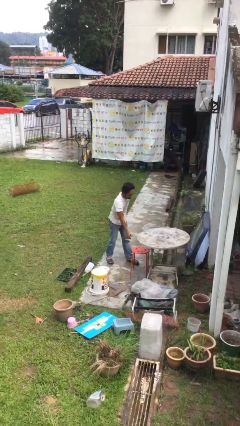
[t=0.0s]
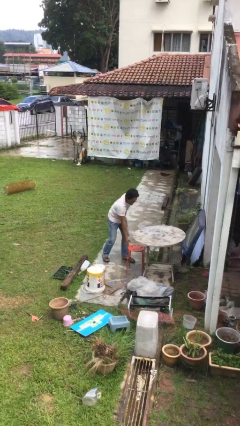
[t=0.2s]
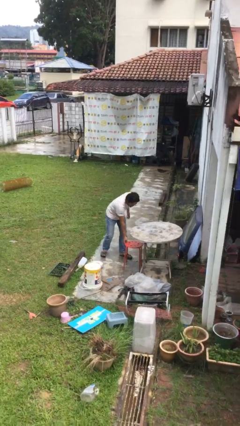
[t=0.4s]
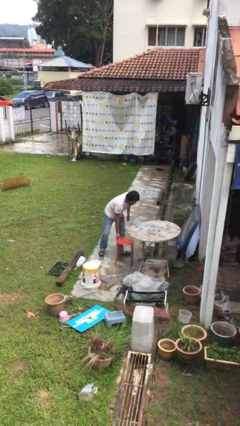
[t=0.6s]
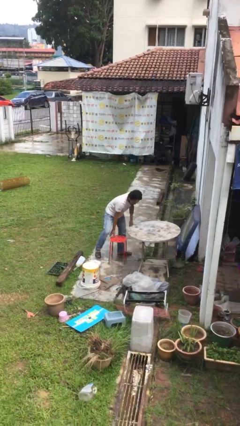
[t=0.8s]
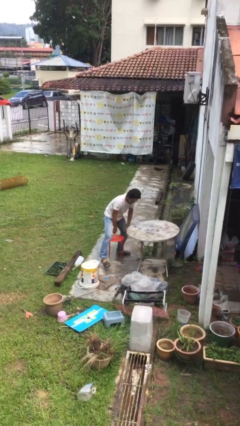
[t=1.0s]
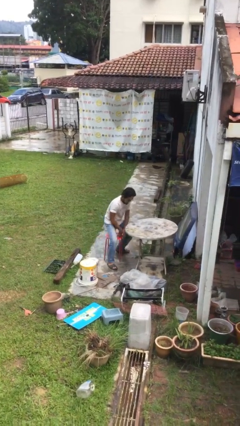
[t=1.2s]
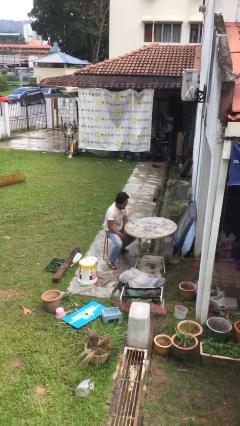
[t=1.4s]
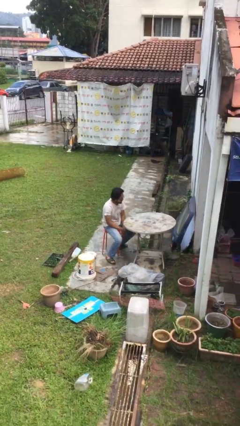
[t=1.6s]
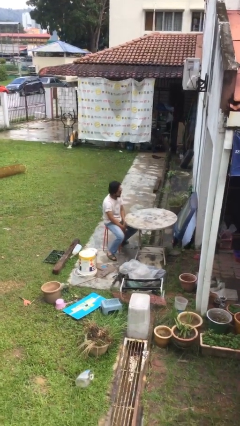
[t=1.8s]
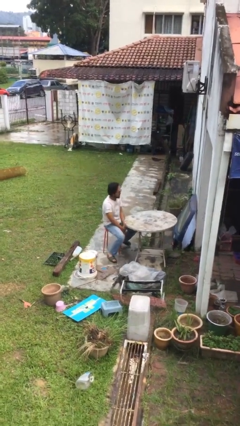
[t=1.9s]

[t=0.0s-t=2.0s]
person sits down

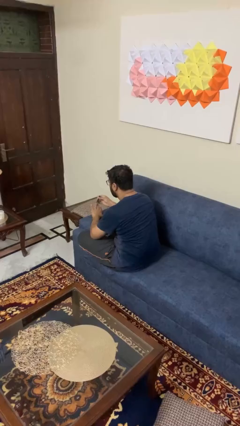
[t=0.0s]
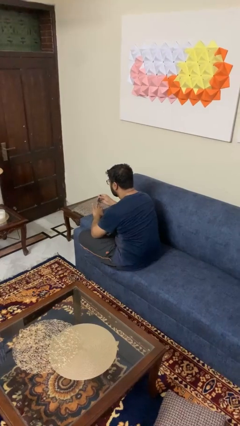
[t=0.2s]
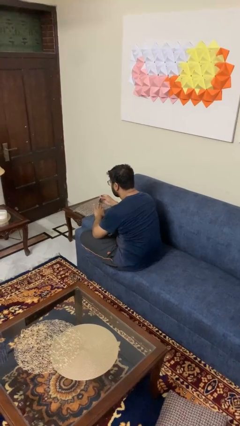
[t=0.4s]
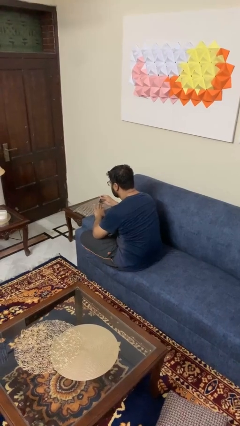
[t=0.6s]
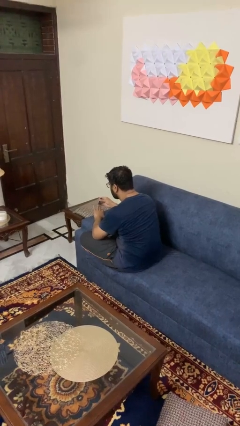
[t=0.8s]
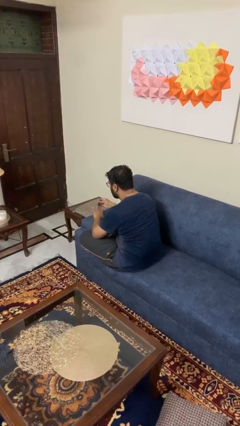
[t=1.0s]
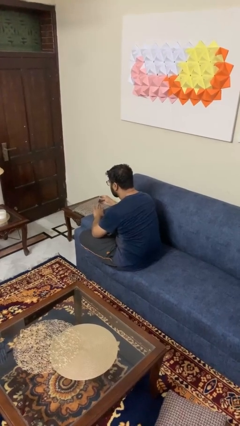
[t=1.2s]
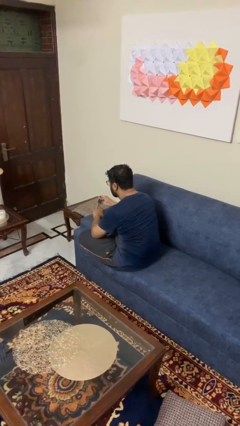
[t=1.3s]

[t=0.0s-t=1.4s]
person clips fingernails

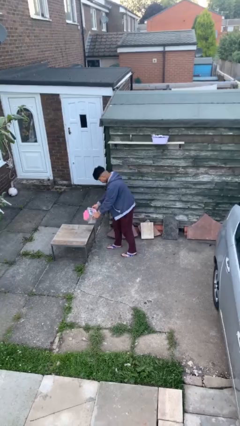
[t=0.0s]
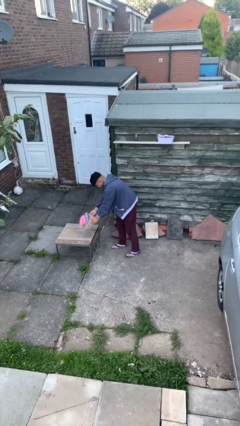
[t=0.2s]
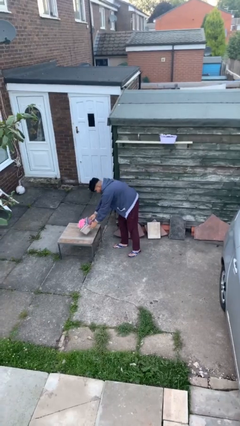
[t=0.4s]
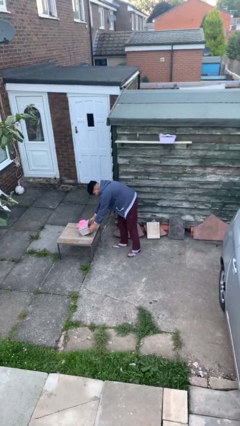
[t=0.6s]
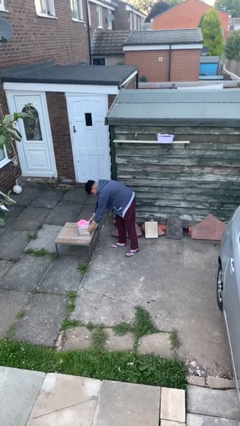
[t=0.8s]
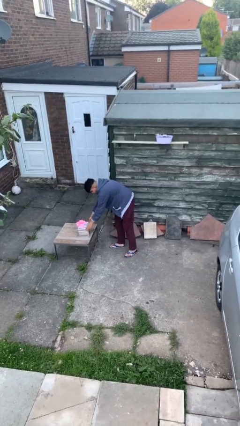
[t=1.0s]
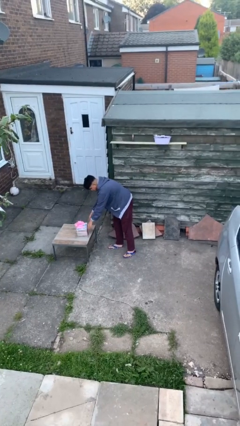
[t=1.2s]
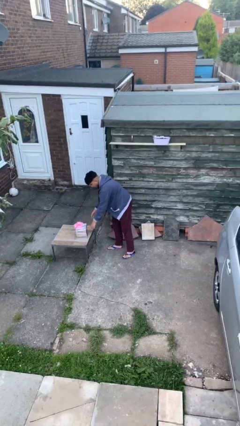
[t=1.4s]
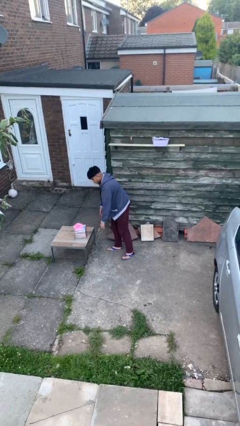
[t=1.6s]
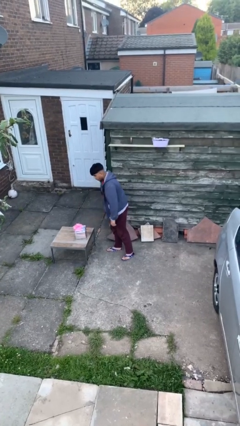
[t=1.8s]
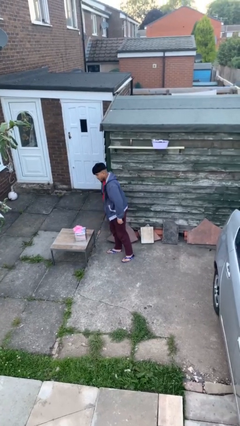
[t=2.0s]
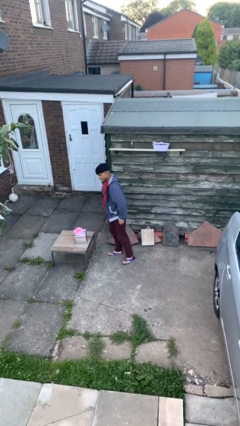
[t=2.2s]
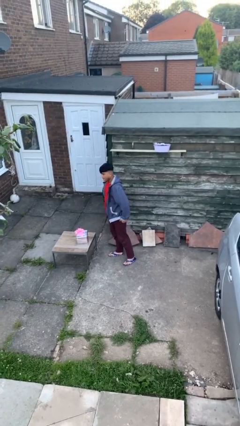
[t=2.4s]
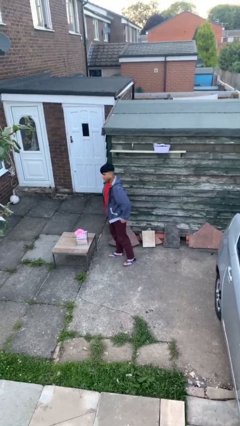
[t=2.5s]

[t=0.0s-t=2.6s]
person puts down object on table

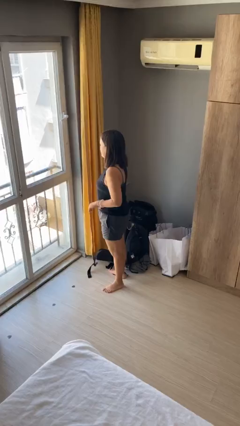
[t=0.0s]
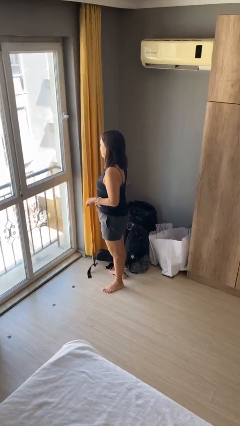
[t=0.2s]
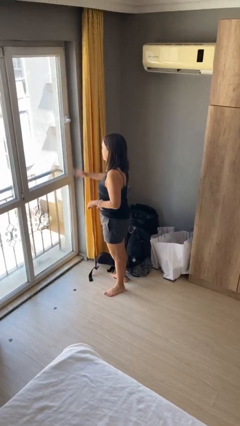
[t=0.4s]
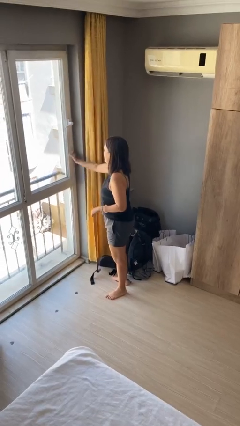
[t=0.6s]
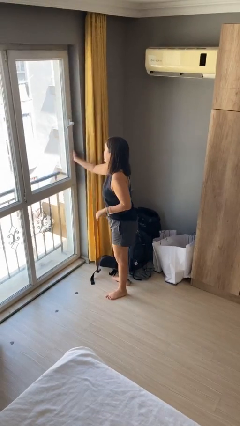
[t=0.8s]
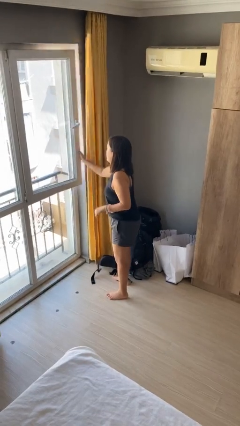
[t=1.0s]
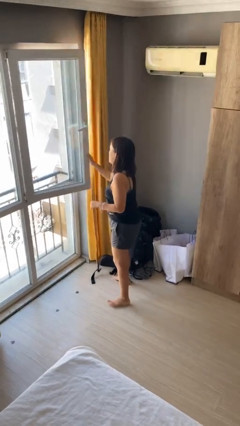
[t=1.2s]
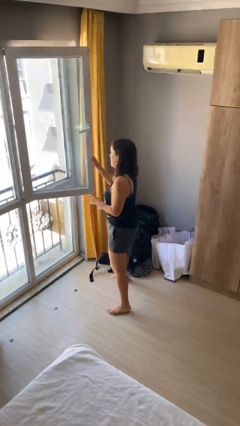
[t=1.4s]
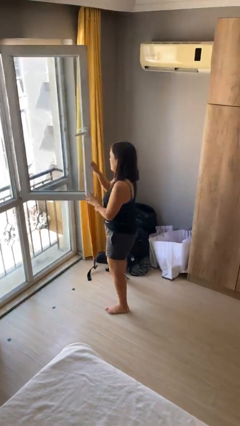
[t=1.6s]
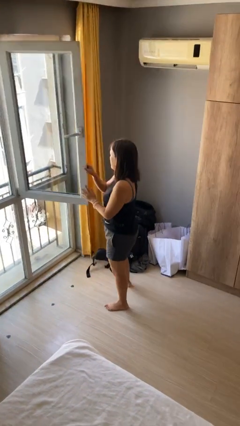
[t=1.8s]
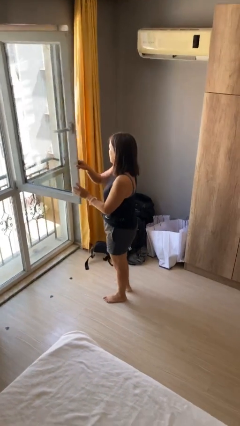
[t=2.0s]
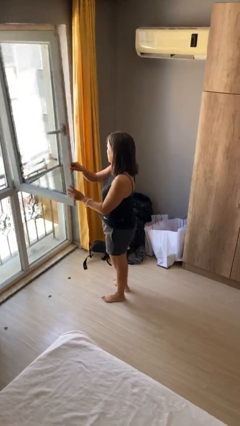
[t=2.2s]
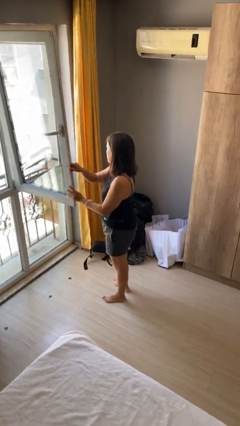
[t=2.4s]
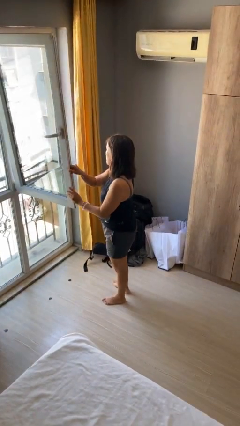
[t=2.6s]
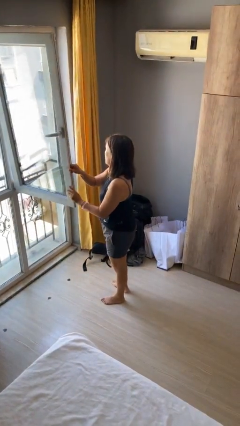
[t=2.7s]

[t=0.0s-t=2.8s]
person opens home window

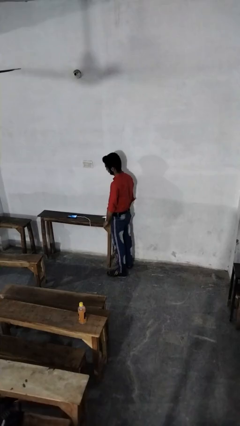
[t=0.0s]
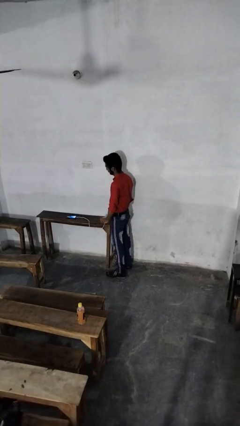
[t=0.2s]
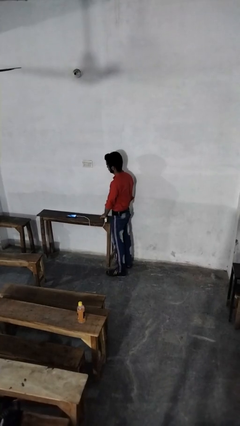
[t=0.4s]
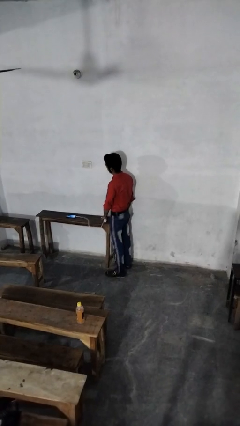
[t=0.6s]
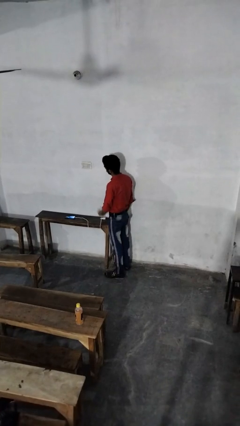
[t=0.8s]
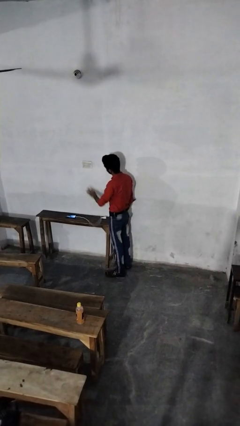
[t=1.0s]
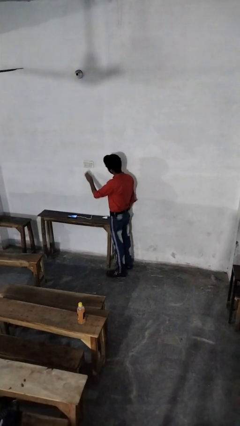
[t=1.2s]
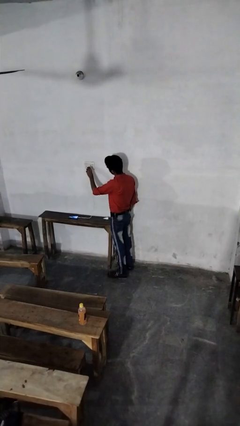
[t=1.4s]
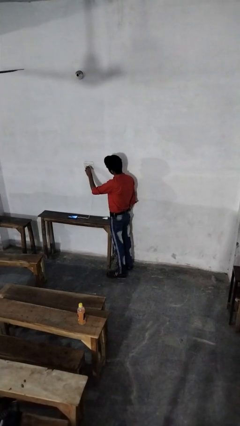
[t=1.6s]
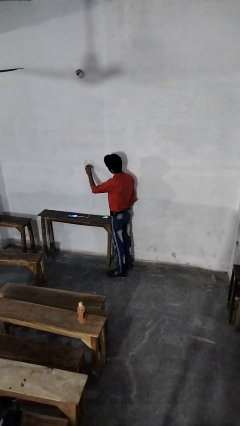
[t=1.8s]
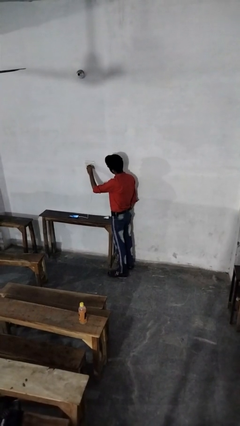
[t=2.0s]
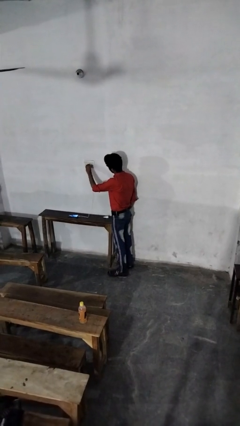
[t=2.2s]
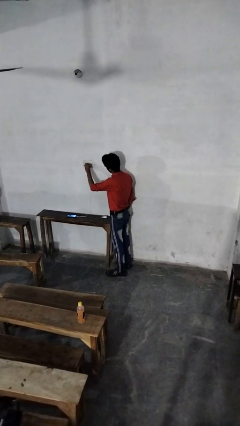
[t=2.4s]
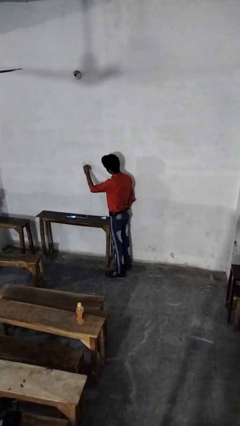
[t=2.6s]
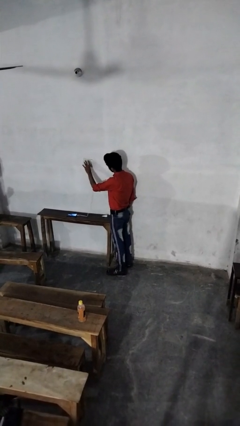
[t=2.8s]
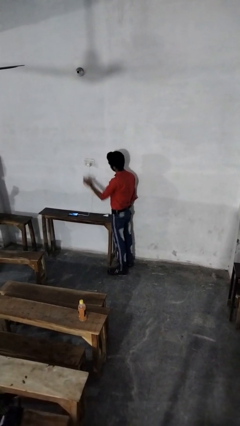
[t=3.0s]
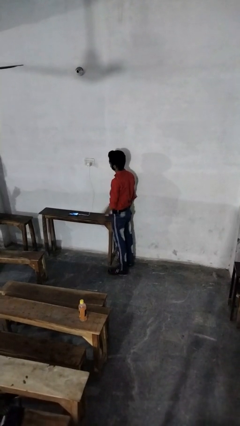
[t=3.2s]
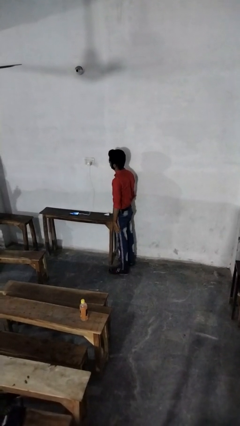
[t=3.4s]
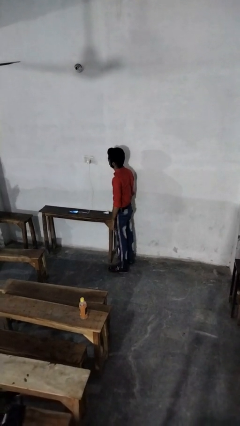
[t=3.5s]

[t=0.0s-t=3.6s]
person plugs into electrical socket

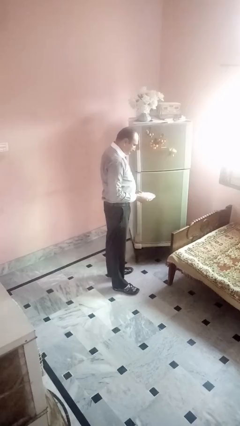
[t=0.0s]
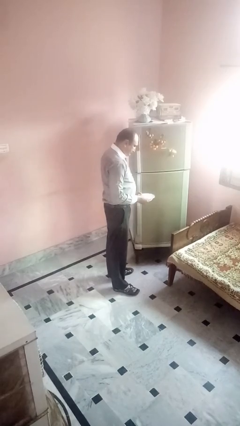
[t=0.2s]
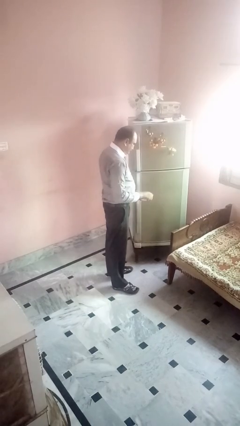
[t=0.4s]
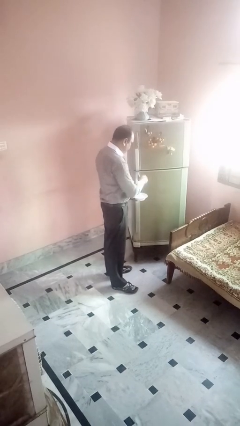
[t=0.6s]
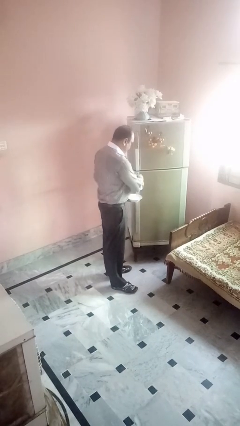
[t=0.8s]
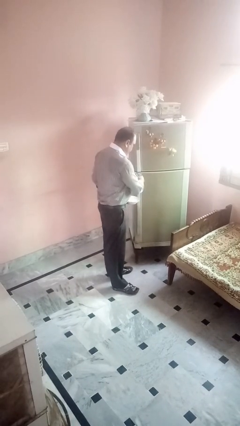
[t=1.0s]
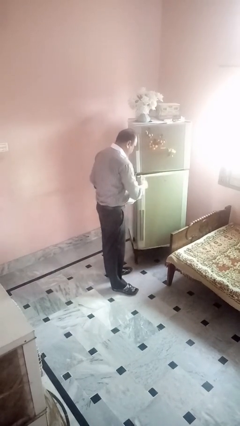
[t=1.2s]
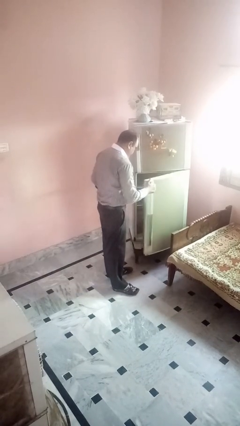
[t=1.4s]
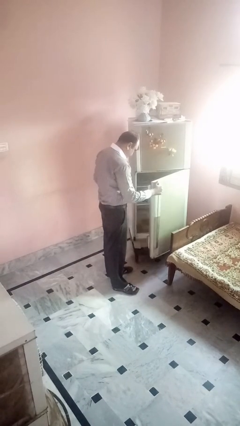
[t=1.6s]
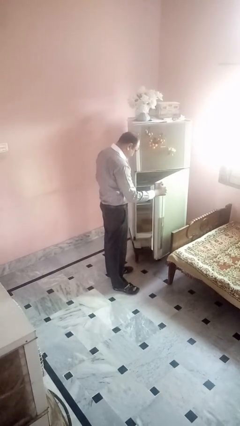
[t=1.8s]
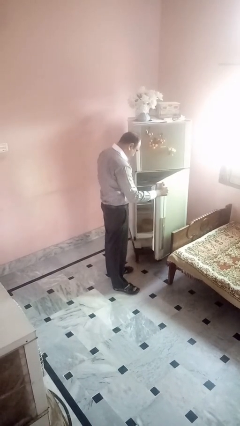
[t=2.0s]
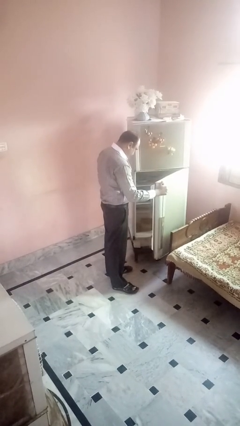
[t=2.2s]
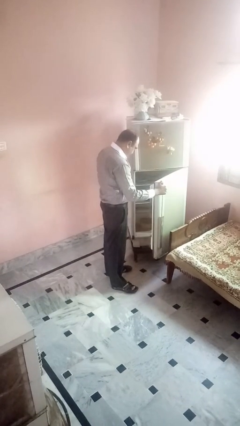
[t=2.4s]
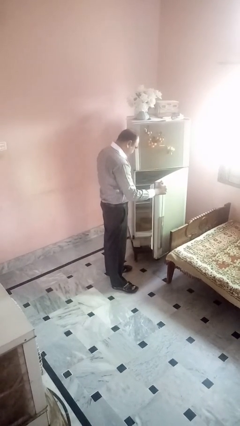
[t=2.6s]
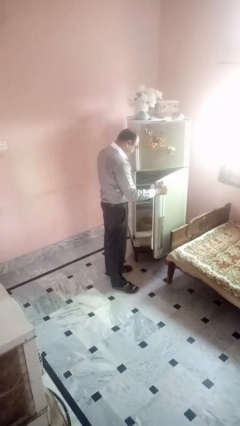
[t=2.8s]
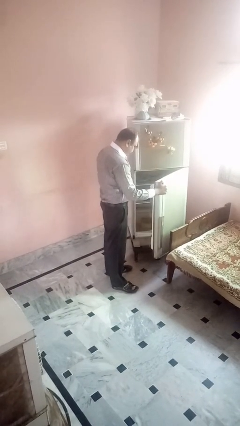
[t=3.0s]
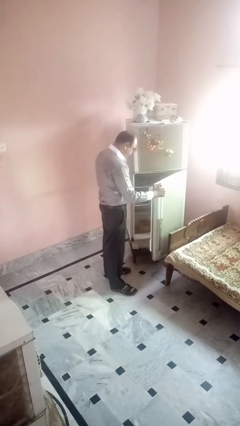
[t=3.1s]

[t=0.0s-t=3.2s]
person opens refrigerator

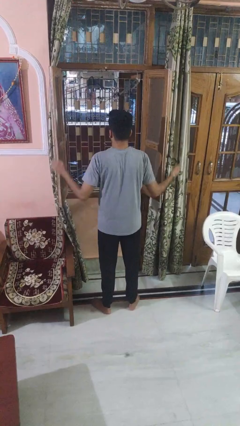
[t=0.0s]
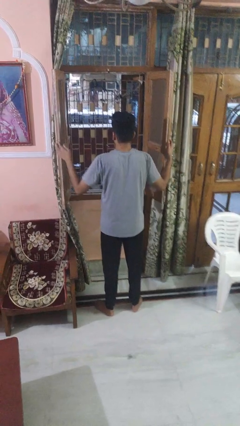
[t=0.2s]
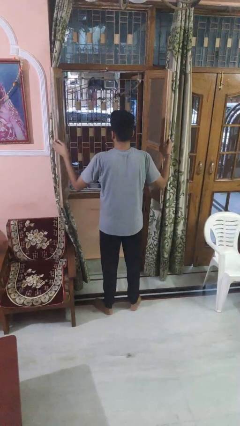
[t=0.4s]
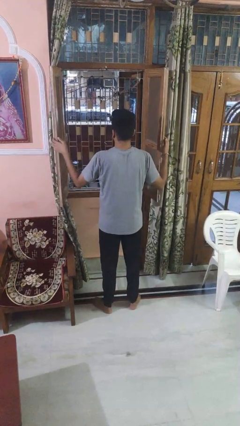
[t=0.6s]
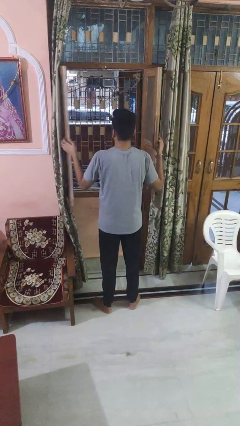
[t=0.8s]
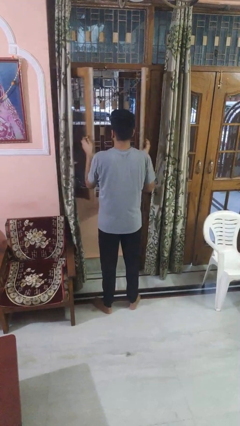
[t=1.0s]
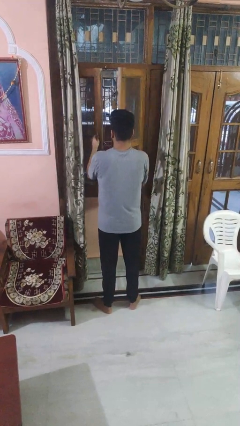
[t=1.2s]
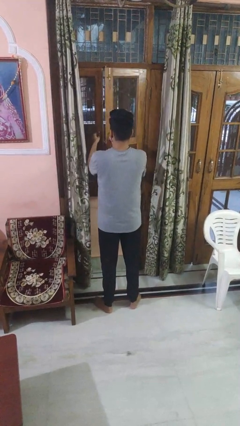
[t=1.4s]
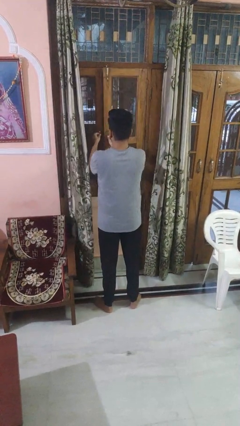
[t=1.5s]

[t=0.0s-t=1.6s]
person closes home window

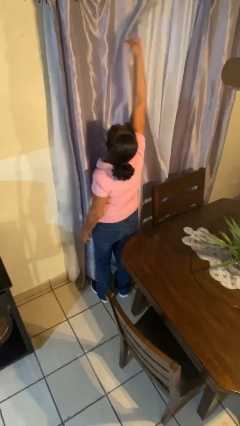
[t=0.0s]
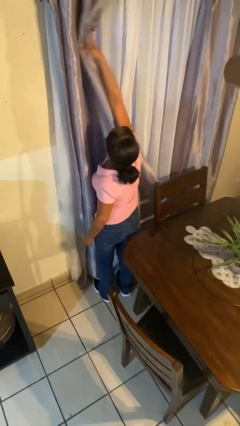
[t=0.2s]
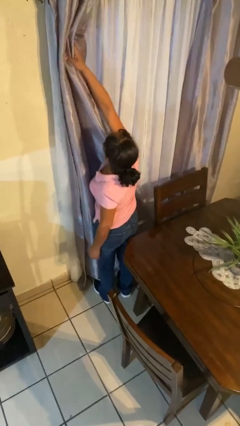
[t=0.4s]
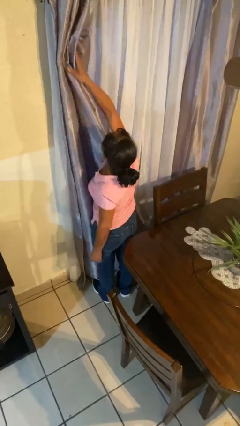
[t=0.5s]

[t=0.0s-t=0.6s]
person opens curtains
